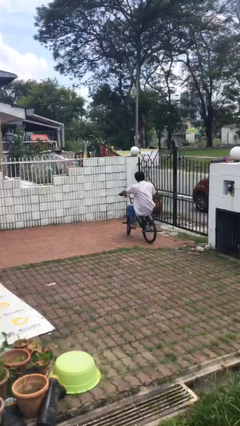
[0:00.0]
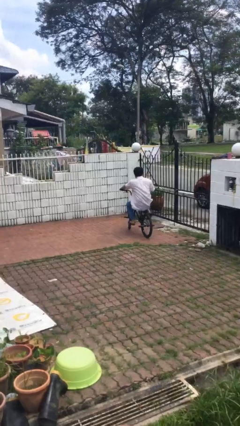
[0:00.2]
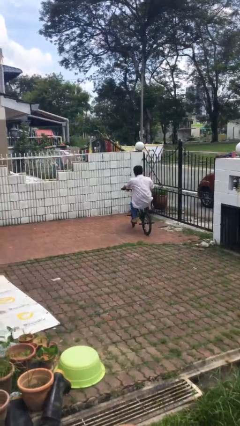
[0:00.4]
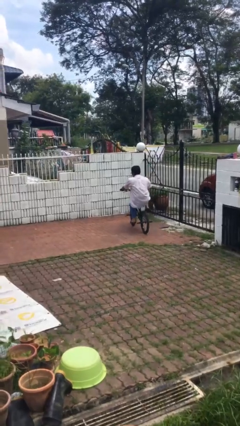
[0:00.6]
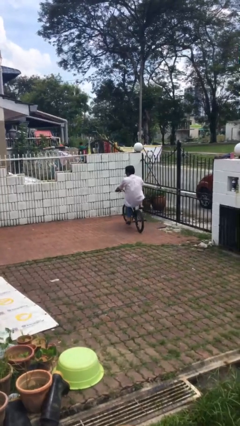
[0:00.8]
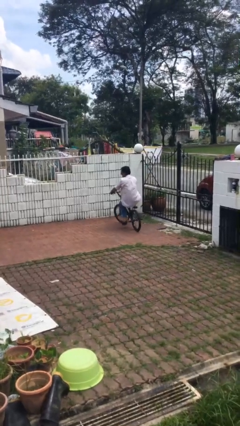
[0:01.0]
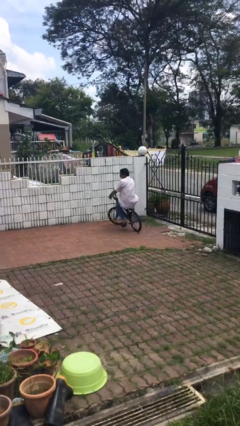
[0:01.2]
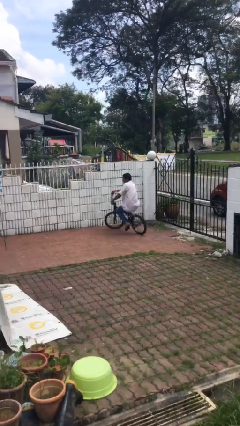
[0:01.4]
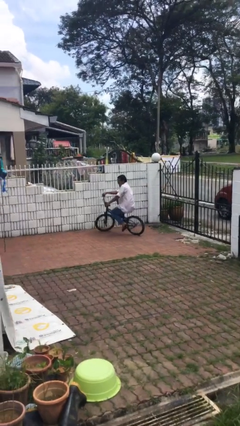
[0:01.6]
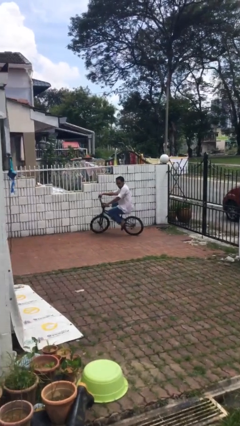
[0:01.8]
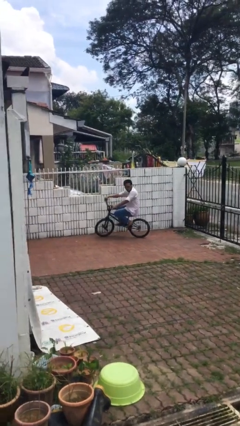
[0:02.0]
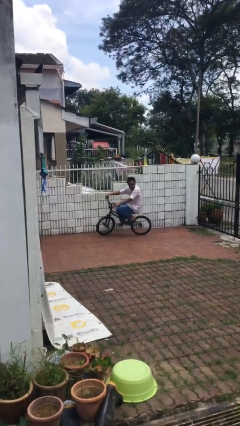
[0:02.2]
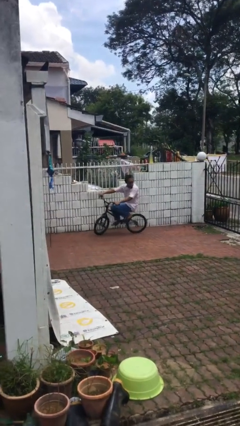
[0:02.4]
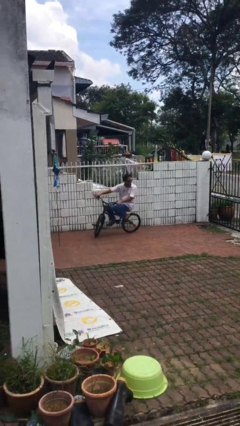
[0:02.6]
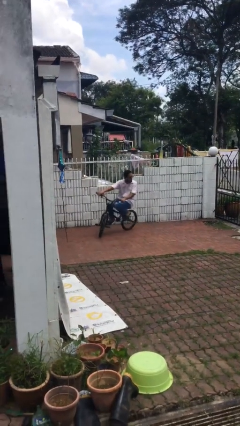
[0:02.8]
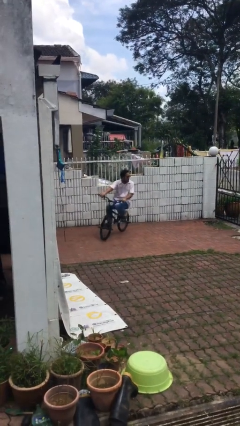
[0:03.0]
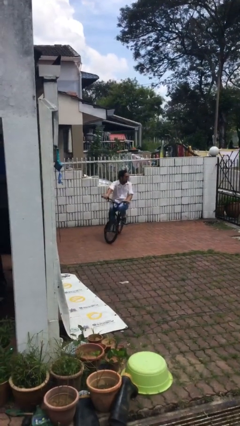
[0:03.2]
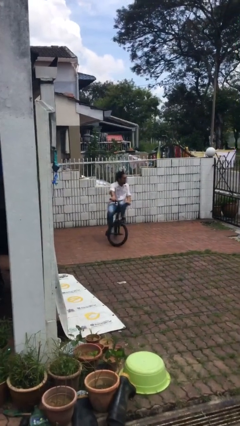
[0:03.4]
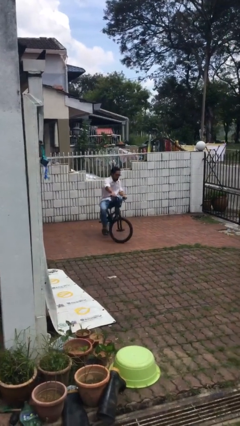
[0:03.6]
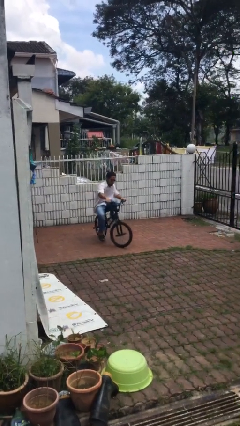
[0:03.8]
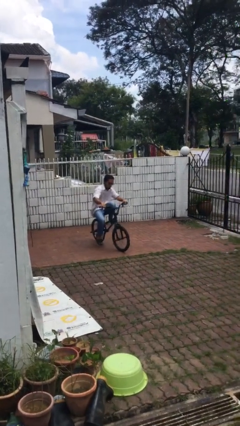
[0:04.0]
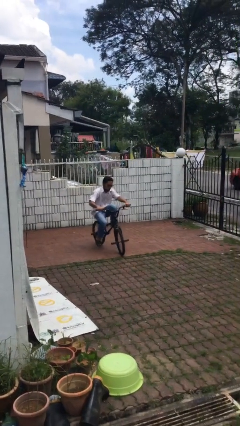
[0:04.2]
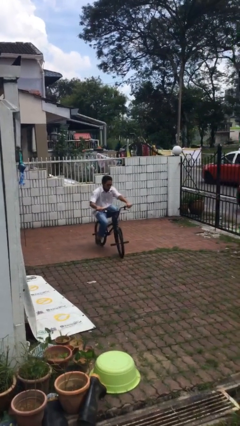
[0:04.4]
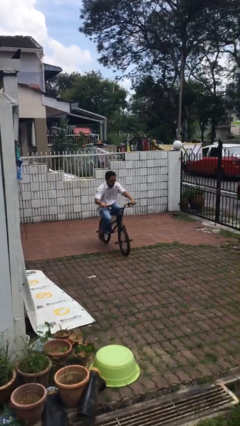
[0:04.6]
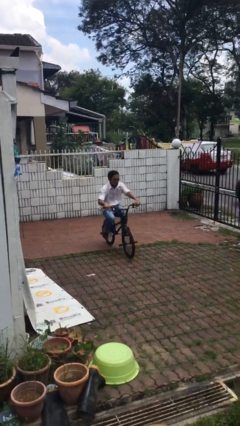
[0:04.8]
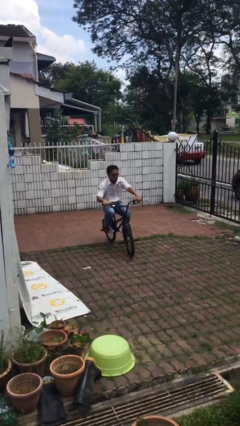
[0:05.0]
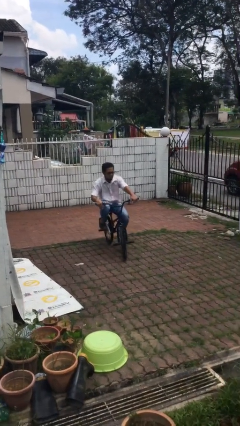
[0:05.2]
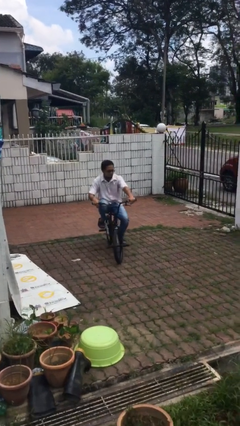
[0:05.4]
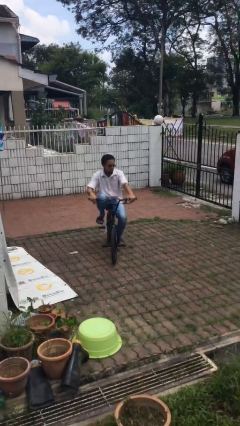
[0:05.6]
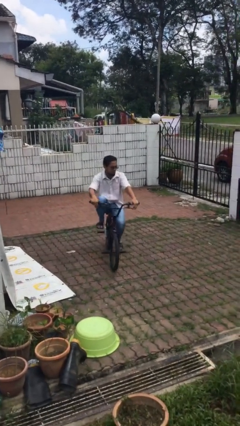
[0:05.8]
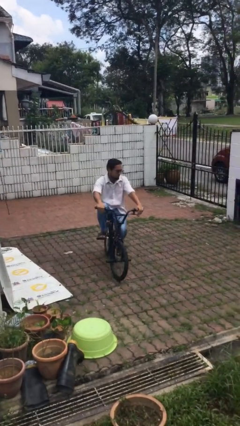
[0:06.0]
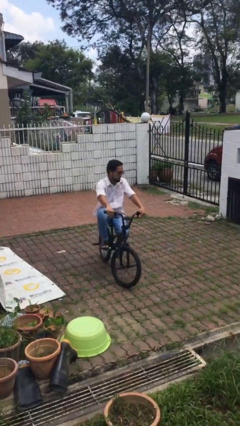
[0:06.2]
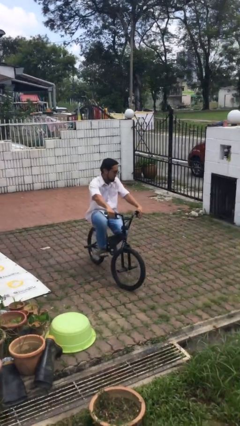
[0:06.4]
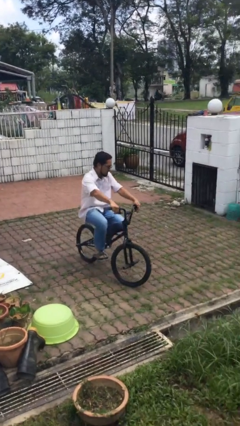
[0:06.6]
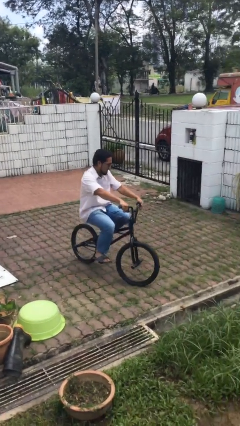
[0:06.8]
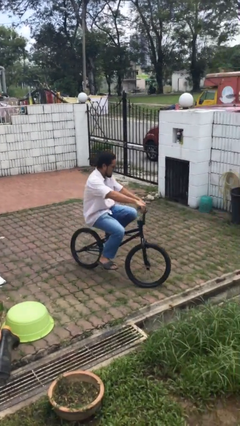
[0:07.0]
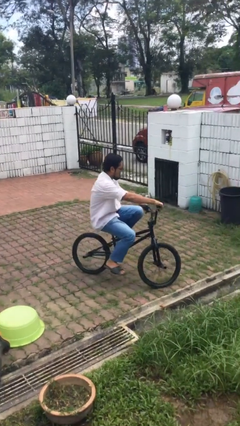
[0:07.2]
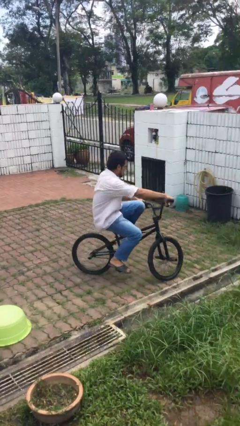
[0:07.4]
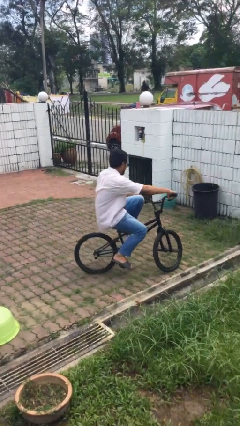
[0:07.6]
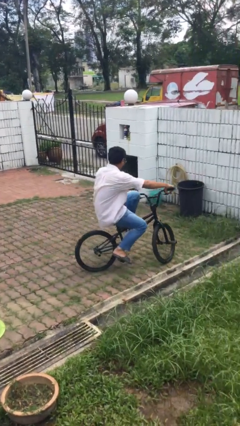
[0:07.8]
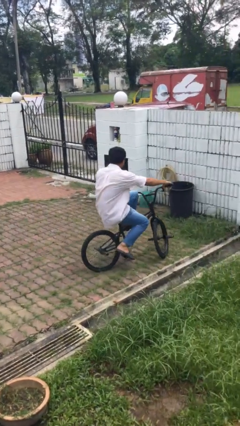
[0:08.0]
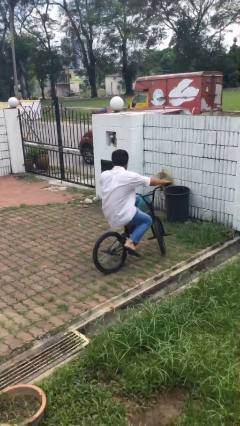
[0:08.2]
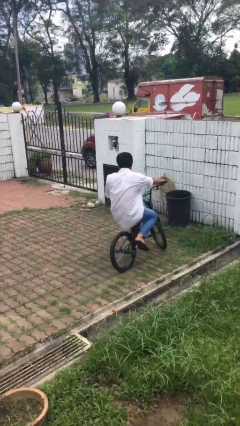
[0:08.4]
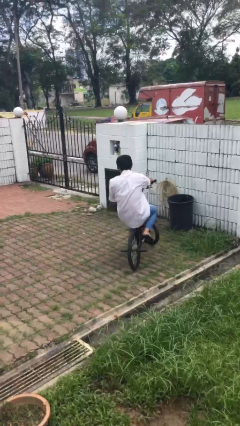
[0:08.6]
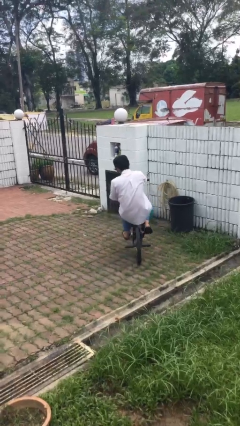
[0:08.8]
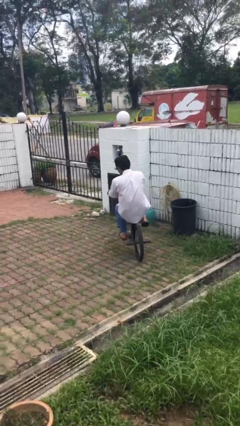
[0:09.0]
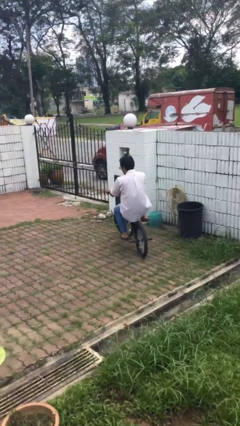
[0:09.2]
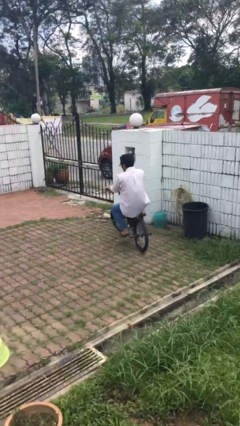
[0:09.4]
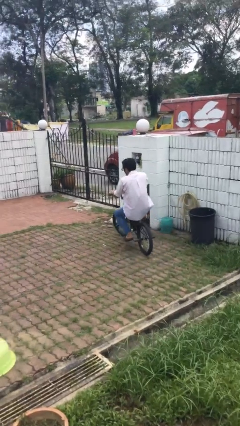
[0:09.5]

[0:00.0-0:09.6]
person rides bicycle

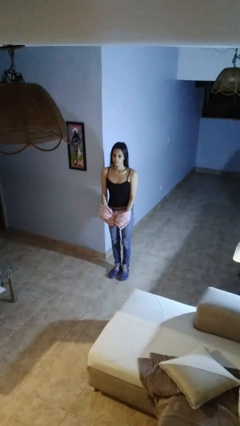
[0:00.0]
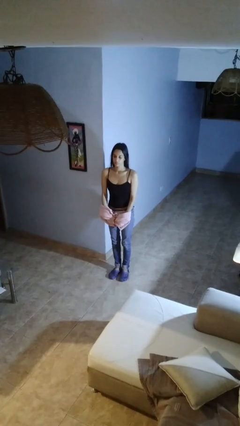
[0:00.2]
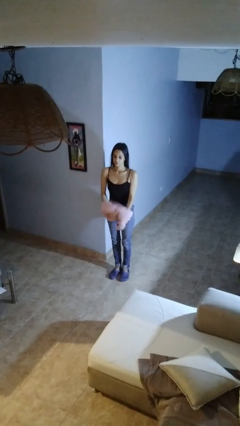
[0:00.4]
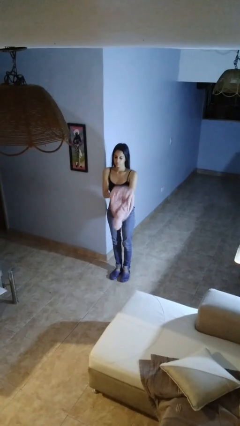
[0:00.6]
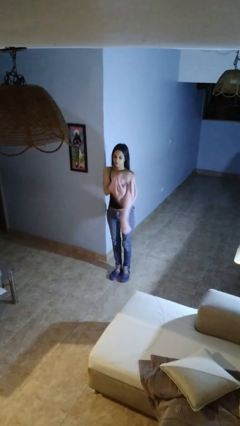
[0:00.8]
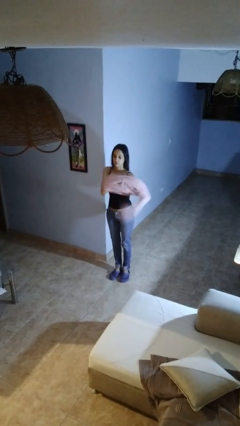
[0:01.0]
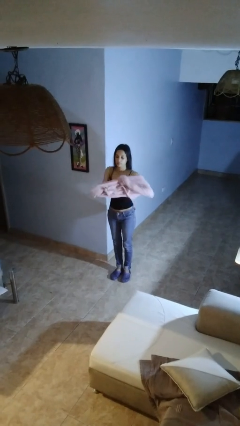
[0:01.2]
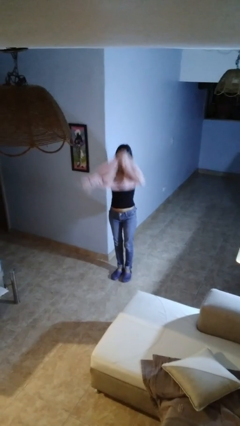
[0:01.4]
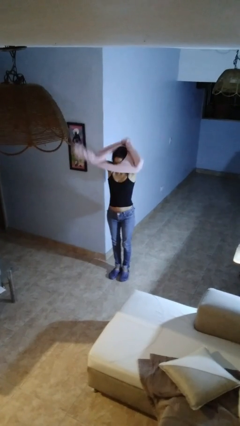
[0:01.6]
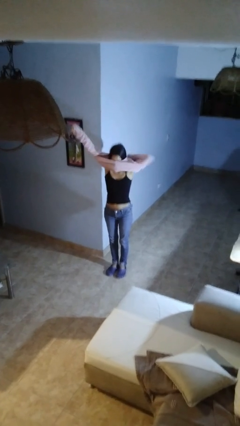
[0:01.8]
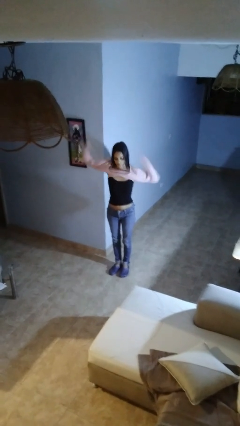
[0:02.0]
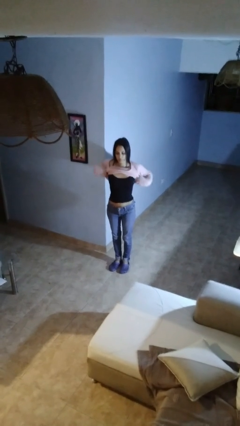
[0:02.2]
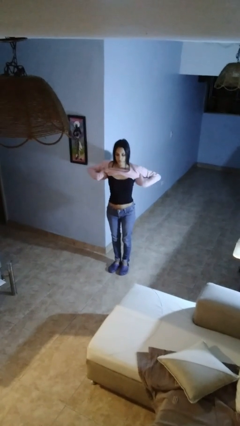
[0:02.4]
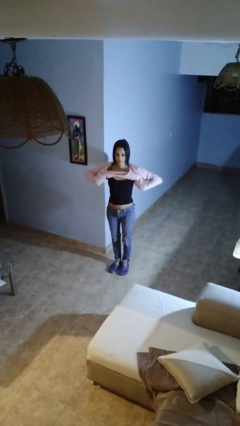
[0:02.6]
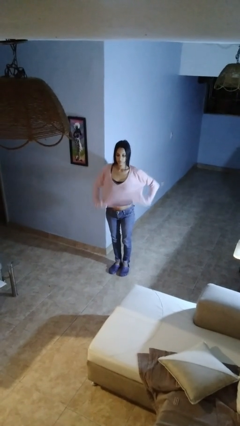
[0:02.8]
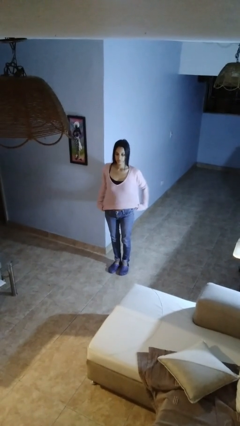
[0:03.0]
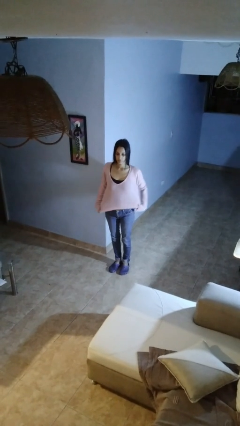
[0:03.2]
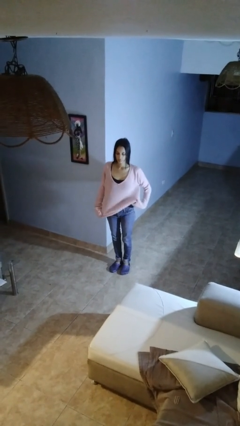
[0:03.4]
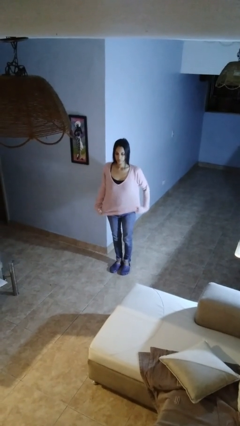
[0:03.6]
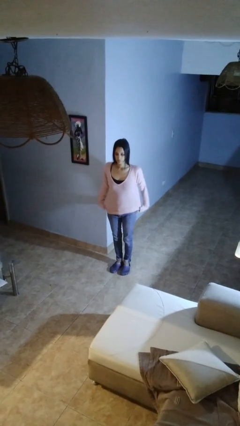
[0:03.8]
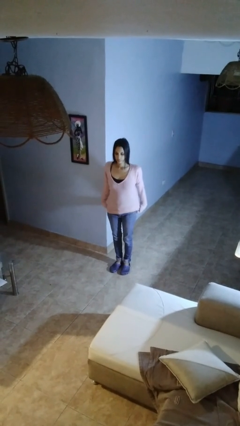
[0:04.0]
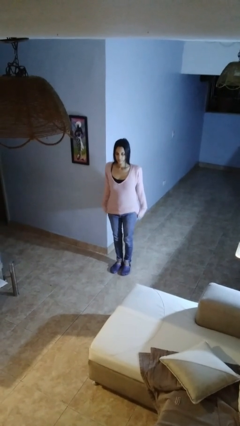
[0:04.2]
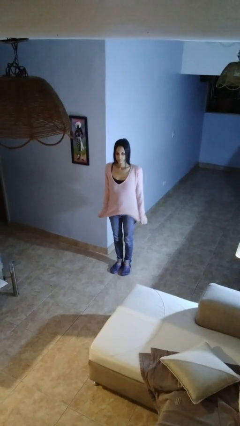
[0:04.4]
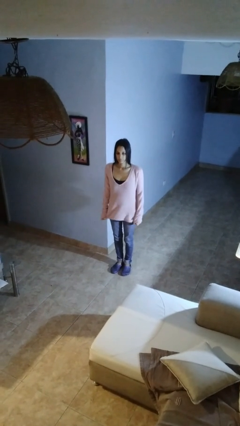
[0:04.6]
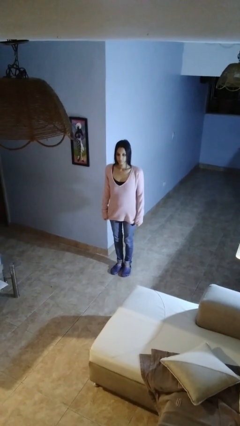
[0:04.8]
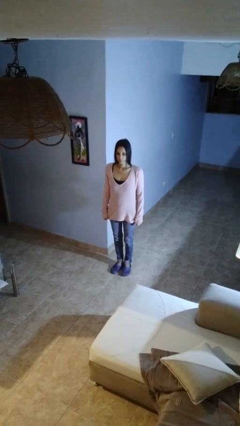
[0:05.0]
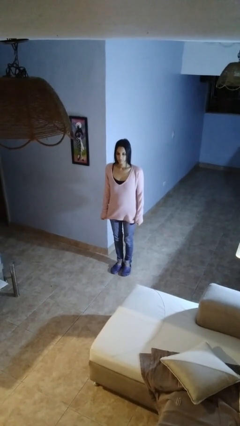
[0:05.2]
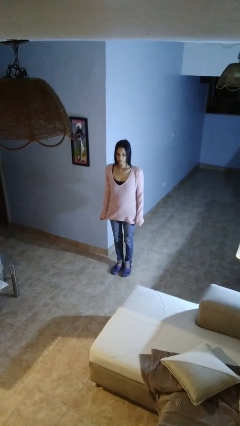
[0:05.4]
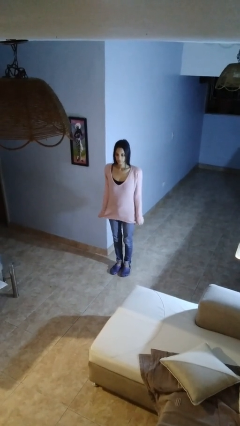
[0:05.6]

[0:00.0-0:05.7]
person puts on shirt

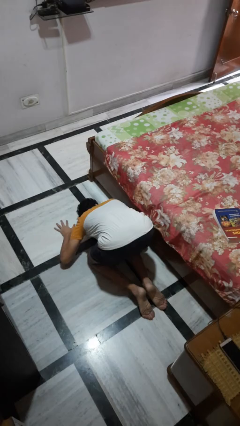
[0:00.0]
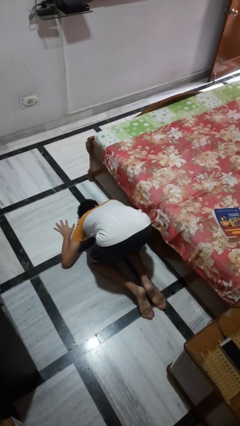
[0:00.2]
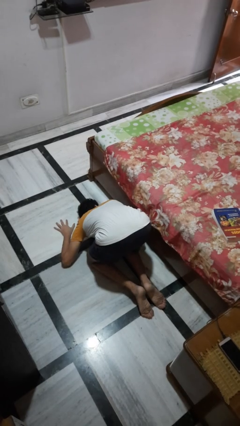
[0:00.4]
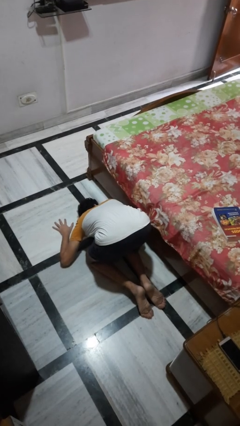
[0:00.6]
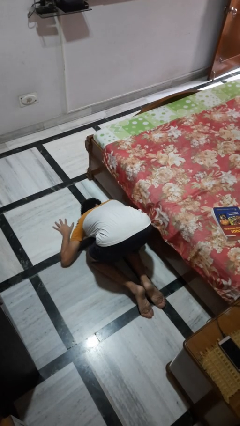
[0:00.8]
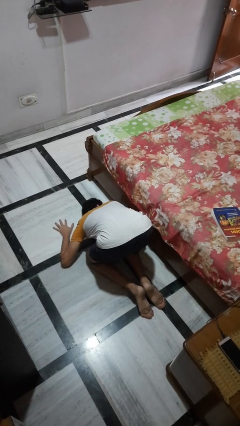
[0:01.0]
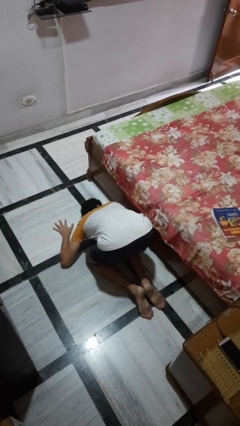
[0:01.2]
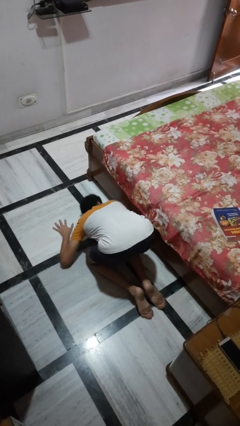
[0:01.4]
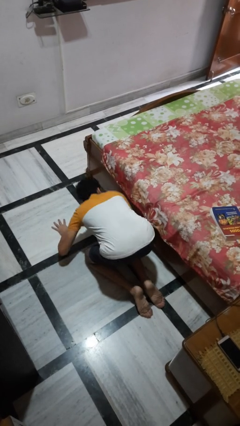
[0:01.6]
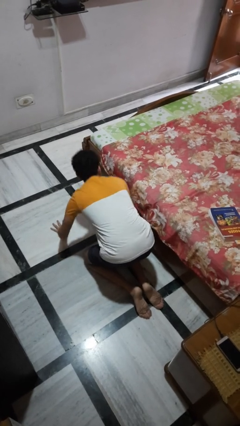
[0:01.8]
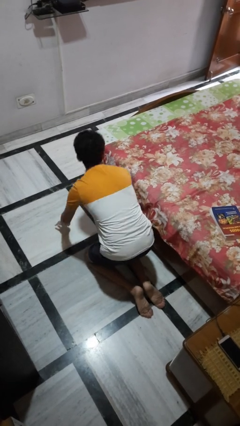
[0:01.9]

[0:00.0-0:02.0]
person searches under bed

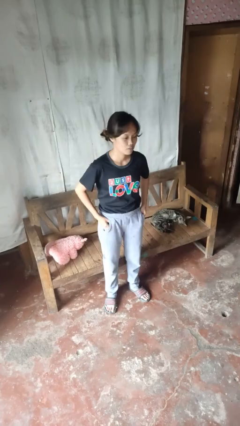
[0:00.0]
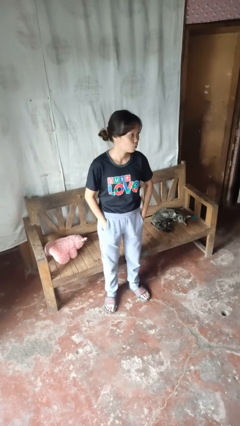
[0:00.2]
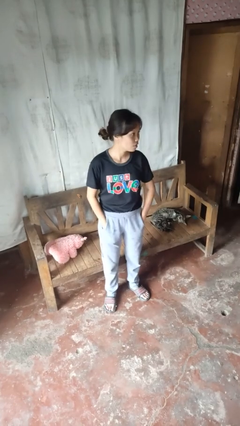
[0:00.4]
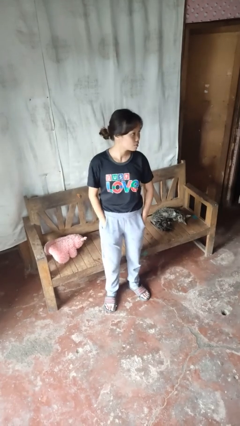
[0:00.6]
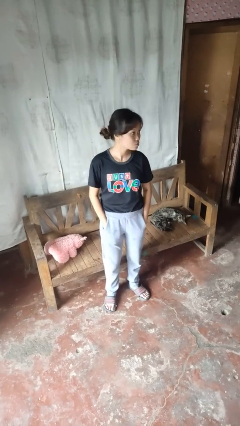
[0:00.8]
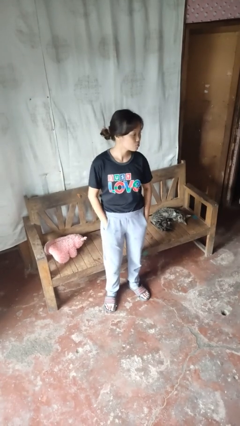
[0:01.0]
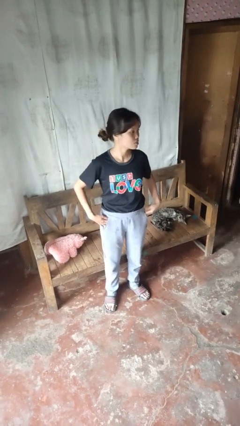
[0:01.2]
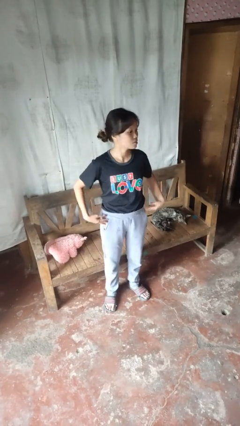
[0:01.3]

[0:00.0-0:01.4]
person puts hands in back pockets
